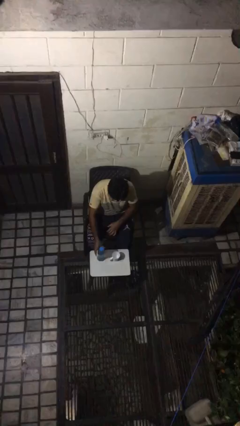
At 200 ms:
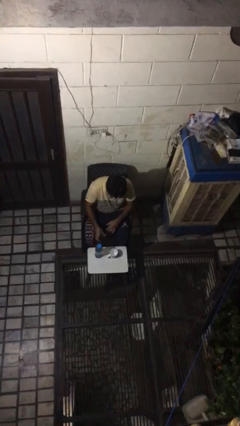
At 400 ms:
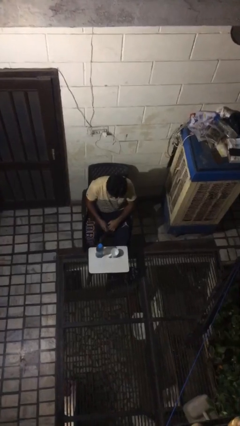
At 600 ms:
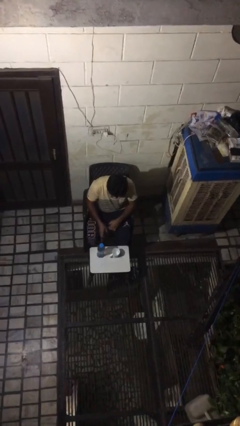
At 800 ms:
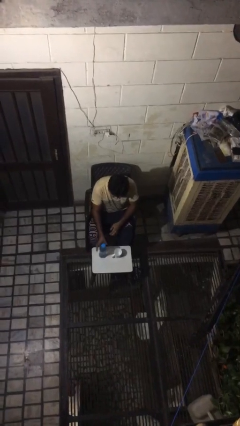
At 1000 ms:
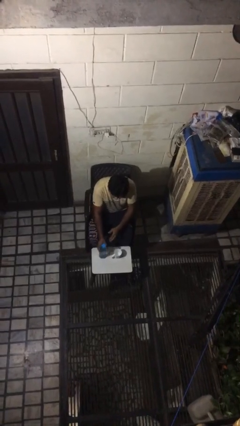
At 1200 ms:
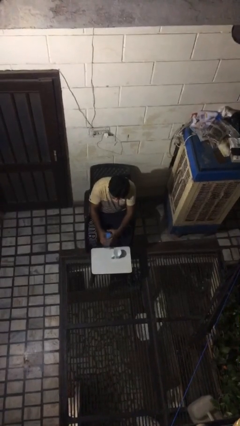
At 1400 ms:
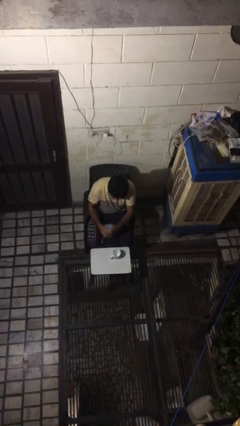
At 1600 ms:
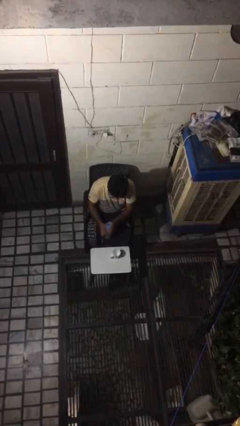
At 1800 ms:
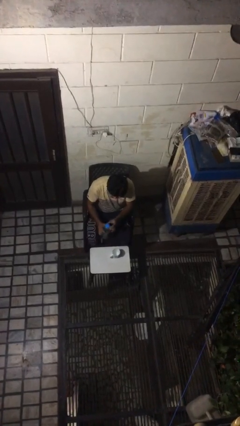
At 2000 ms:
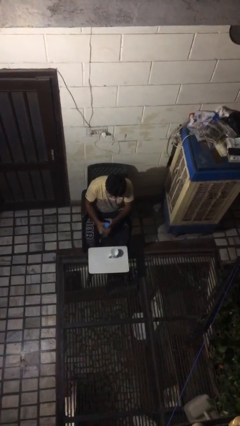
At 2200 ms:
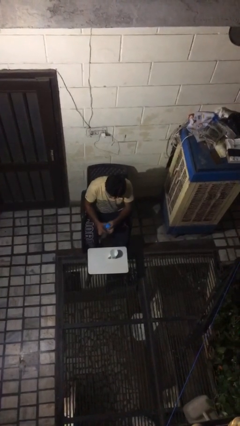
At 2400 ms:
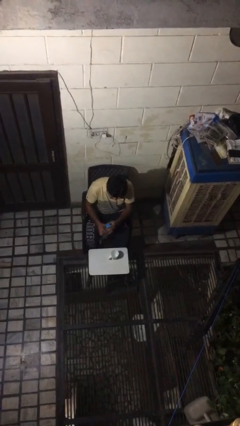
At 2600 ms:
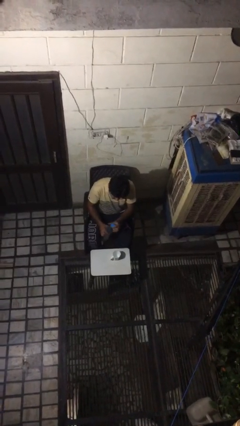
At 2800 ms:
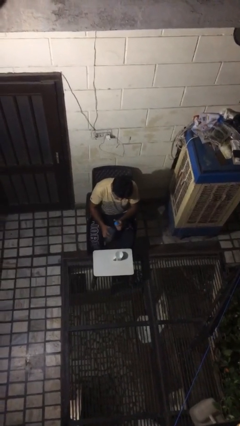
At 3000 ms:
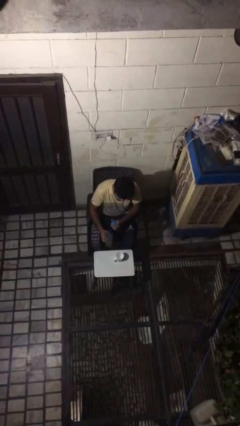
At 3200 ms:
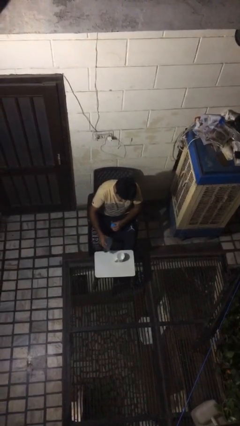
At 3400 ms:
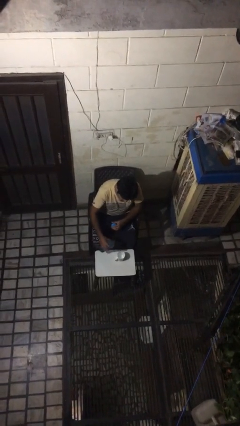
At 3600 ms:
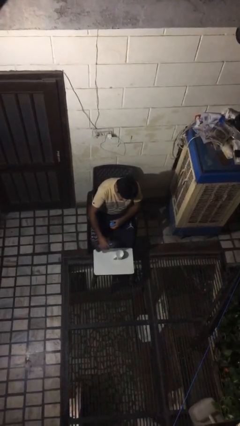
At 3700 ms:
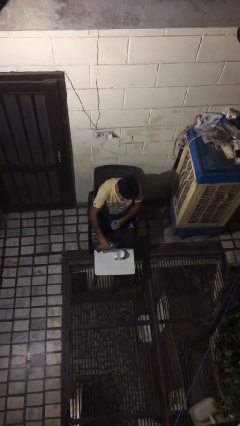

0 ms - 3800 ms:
person unscrews lid from bottle
